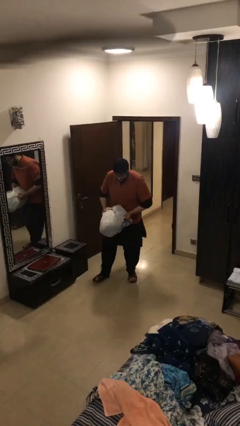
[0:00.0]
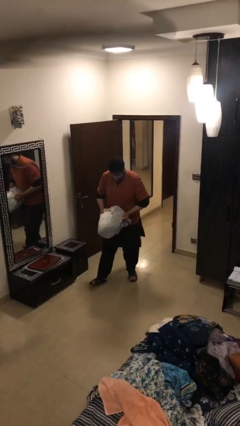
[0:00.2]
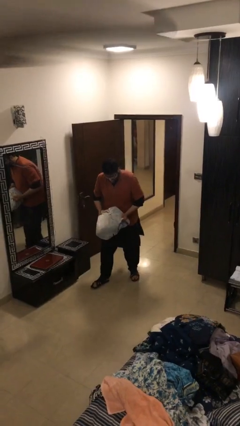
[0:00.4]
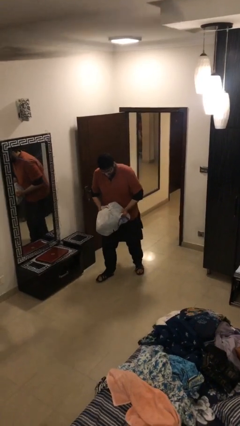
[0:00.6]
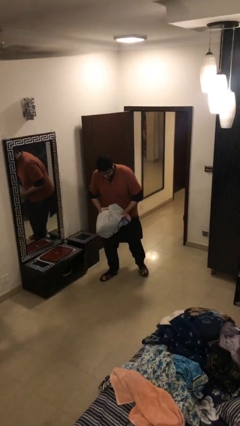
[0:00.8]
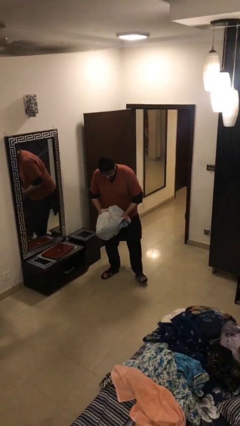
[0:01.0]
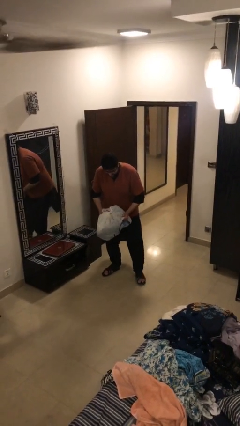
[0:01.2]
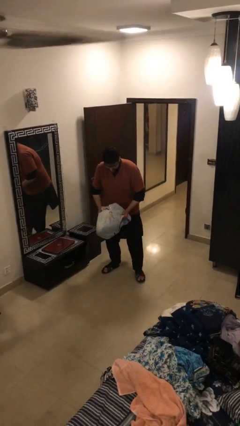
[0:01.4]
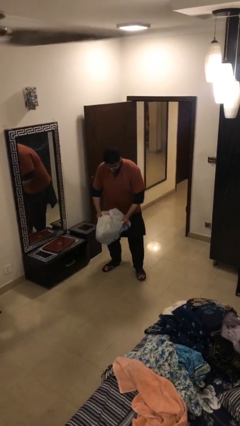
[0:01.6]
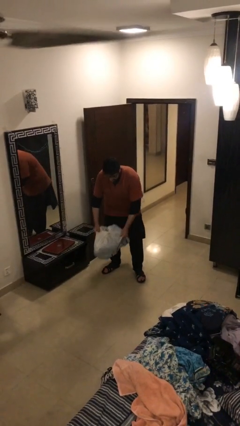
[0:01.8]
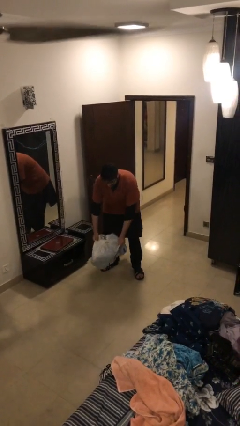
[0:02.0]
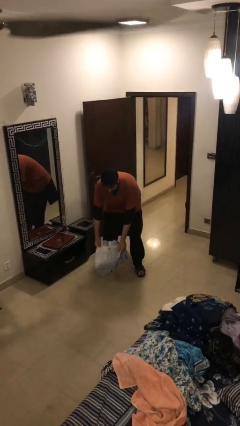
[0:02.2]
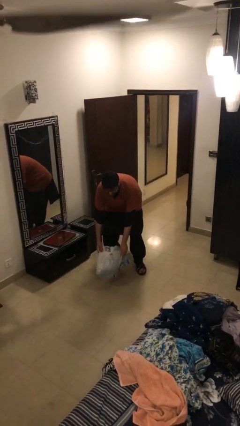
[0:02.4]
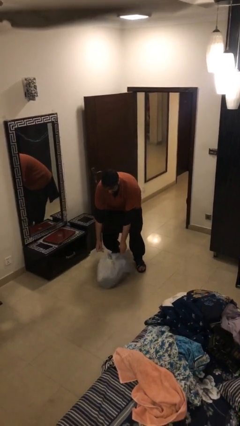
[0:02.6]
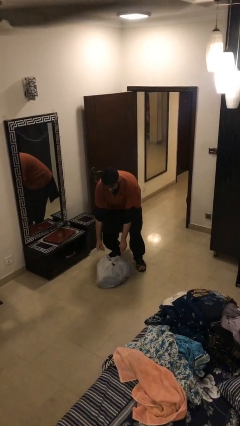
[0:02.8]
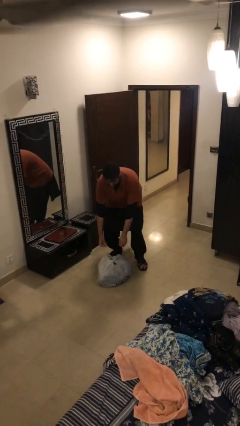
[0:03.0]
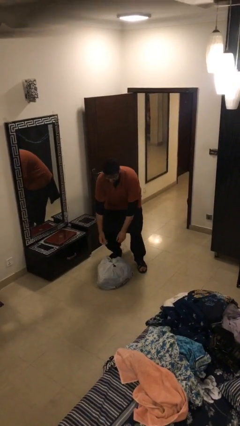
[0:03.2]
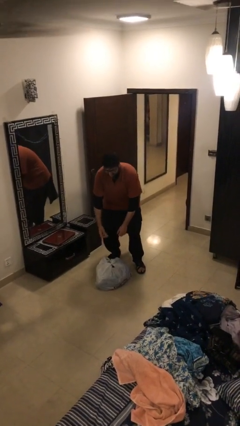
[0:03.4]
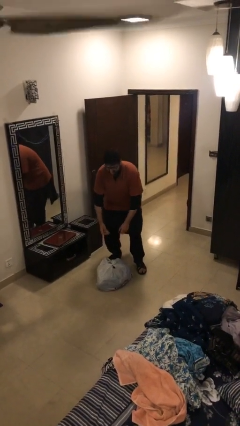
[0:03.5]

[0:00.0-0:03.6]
person puts down object on floor

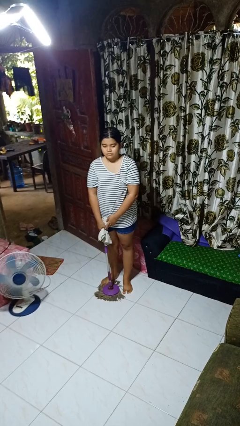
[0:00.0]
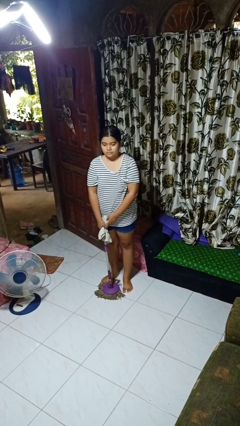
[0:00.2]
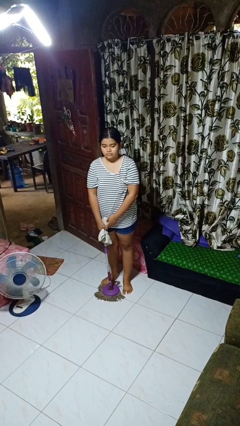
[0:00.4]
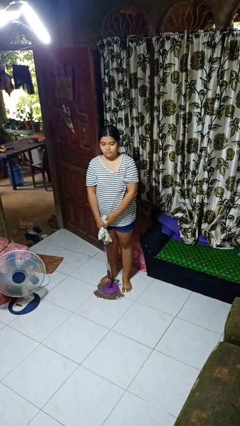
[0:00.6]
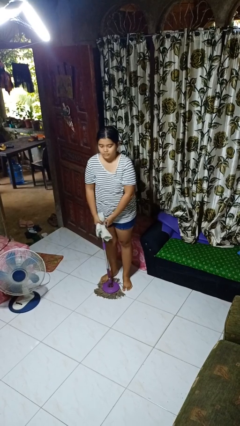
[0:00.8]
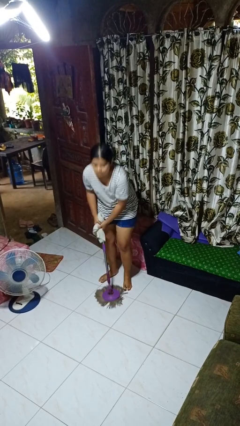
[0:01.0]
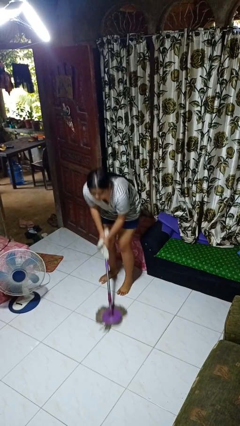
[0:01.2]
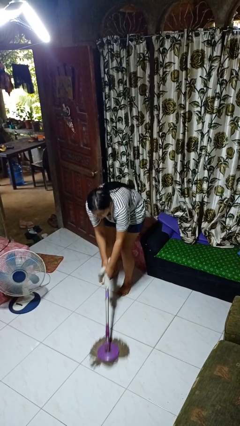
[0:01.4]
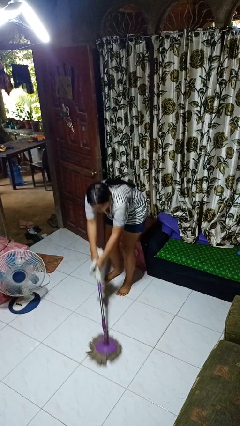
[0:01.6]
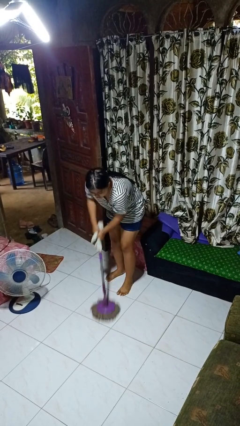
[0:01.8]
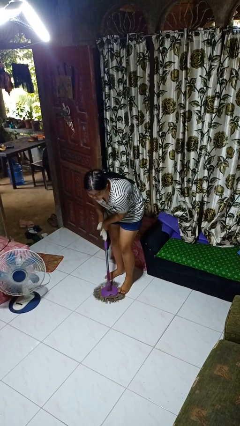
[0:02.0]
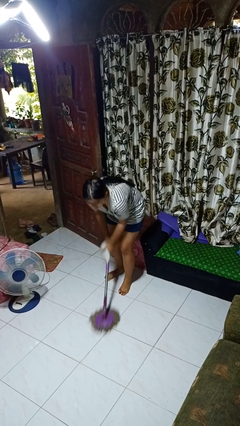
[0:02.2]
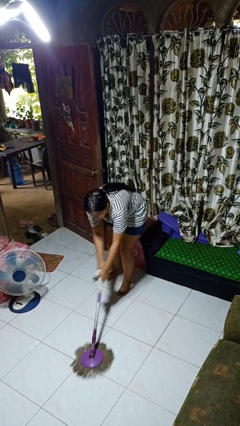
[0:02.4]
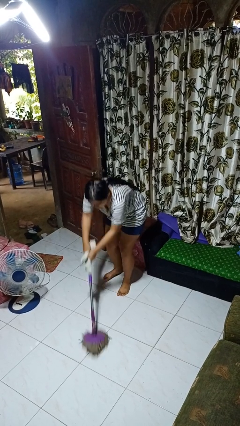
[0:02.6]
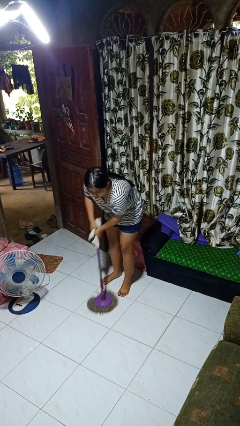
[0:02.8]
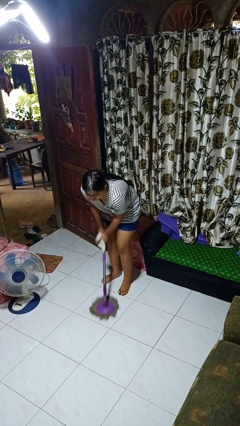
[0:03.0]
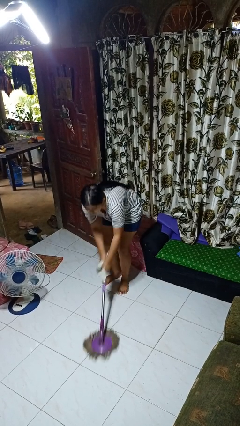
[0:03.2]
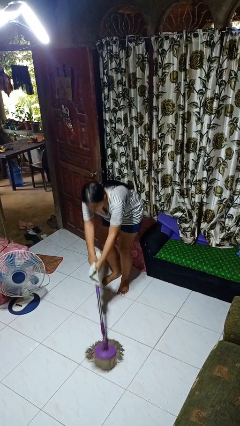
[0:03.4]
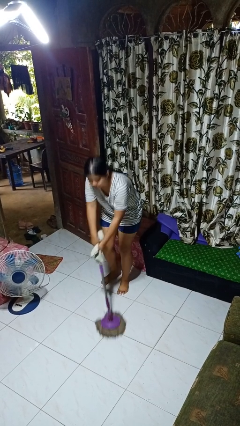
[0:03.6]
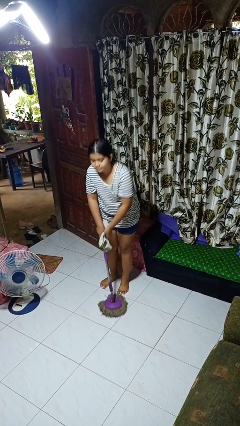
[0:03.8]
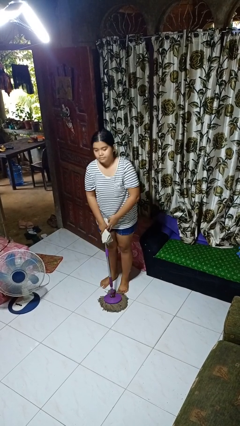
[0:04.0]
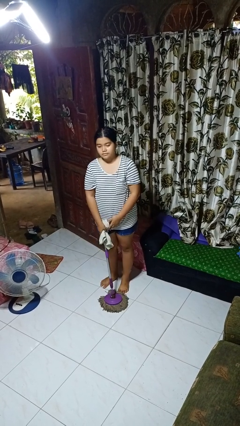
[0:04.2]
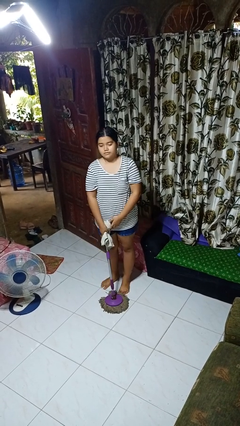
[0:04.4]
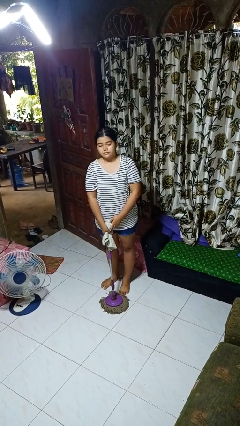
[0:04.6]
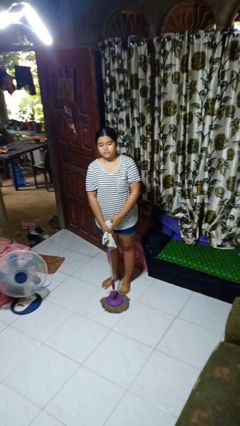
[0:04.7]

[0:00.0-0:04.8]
person mops

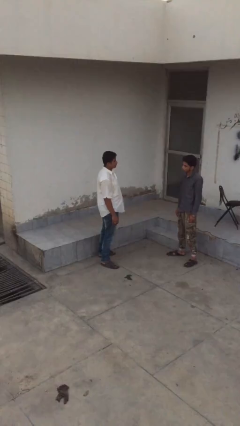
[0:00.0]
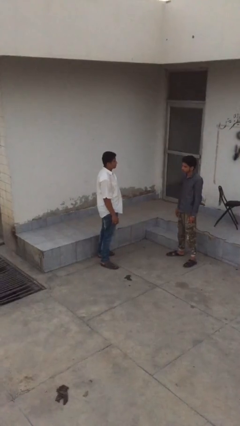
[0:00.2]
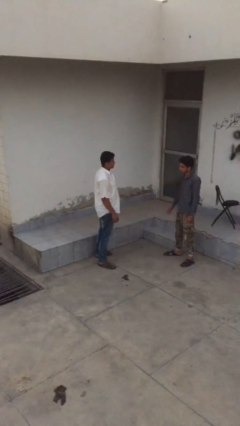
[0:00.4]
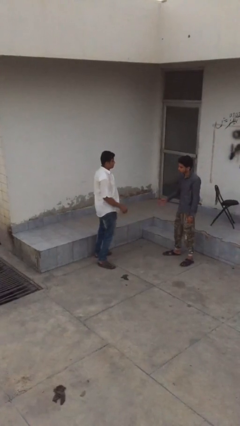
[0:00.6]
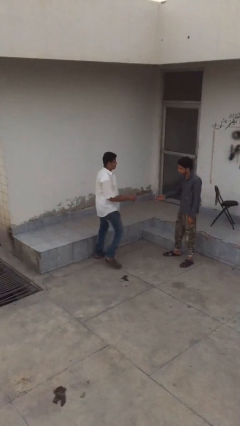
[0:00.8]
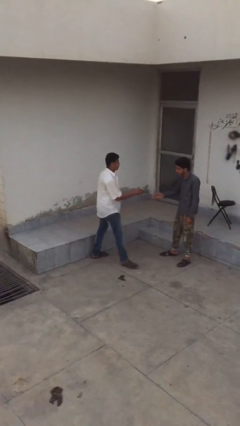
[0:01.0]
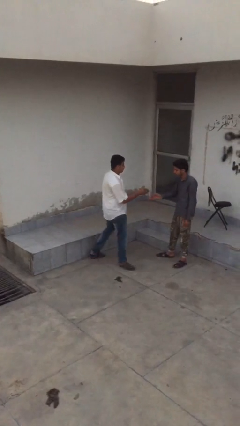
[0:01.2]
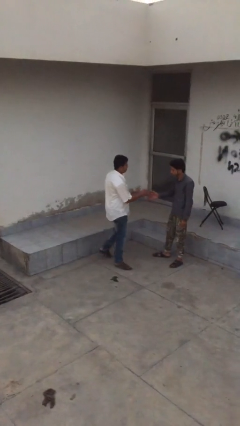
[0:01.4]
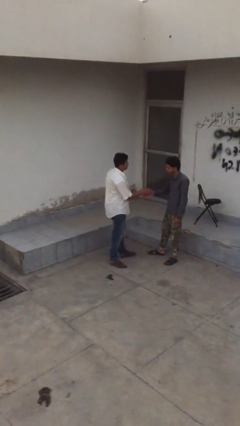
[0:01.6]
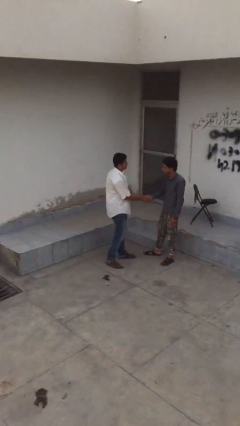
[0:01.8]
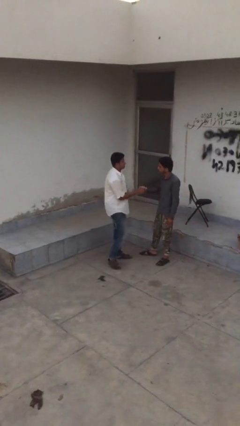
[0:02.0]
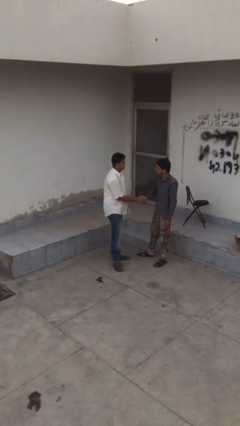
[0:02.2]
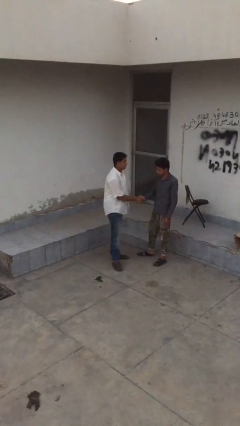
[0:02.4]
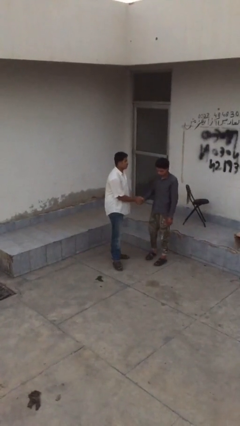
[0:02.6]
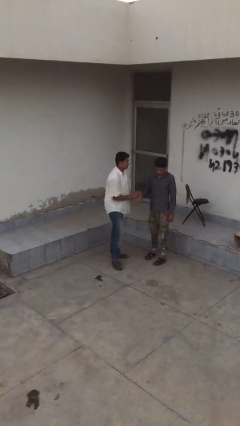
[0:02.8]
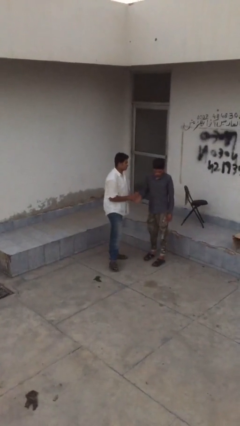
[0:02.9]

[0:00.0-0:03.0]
person shakes hand

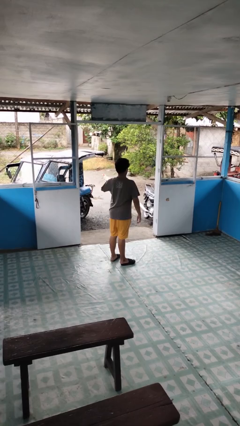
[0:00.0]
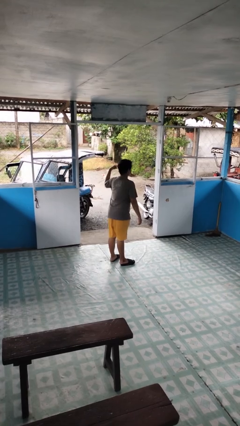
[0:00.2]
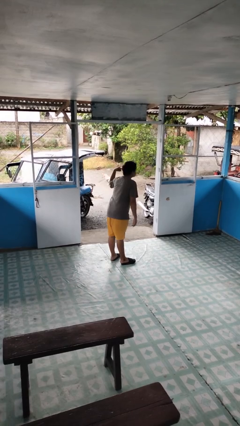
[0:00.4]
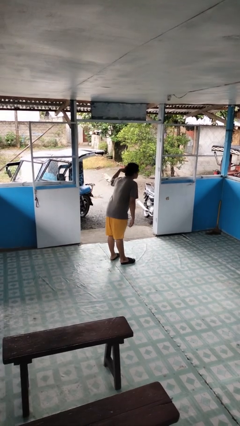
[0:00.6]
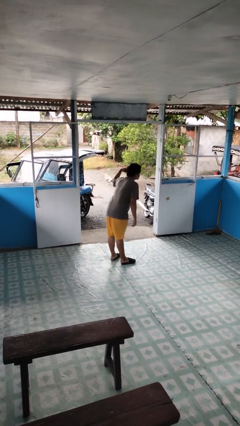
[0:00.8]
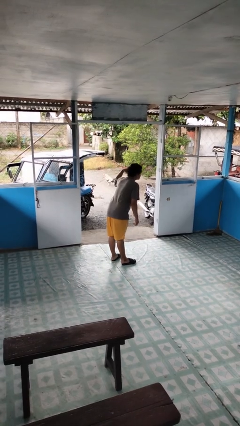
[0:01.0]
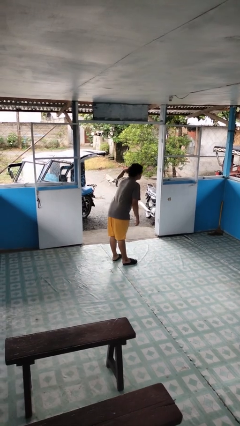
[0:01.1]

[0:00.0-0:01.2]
person gestures listen closely

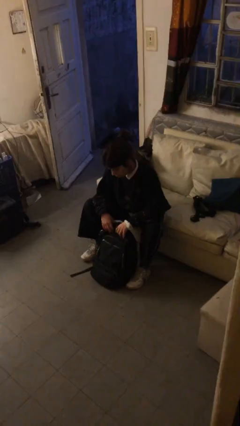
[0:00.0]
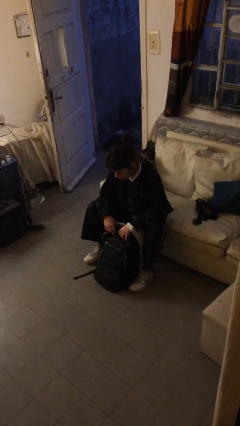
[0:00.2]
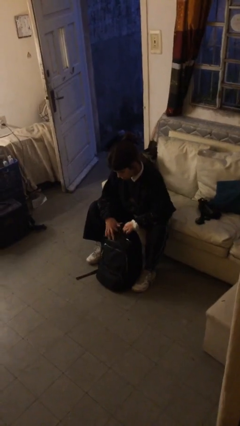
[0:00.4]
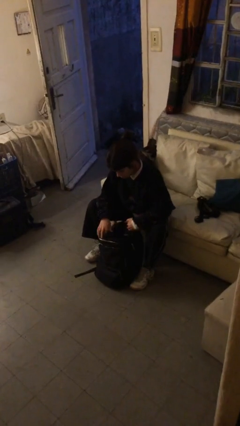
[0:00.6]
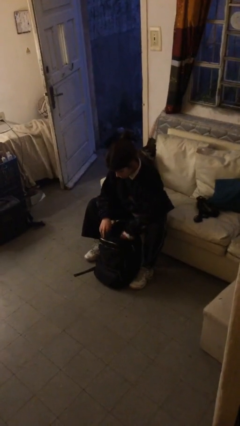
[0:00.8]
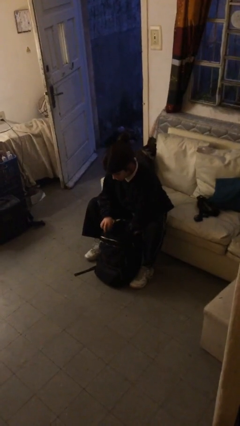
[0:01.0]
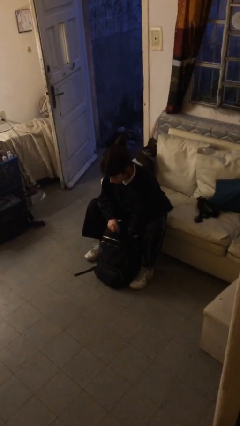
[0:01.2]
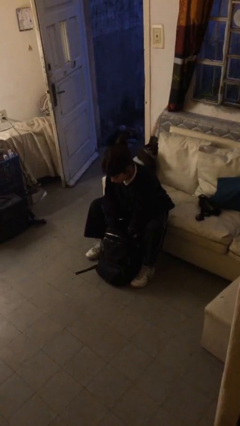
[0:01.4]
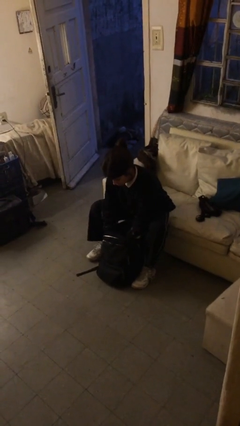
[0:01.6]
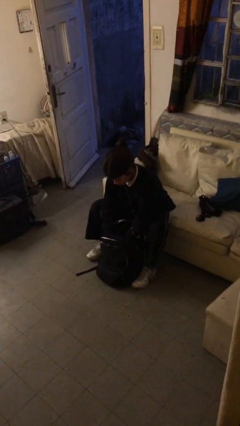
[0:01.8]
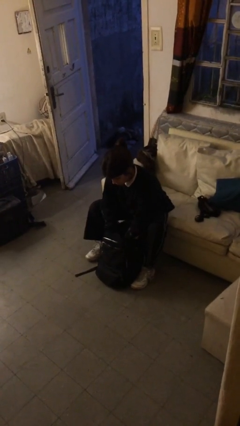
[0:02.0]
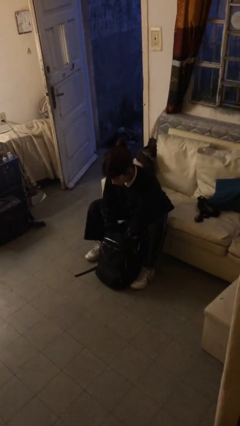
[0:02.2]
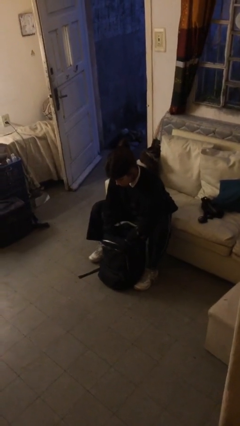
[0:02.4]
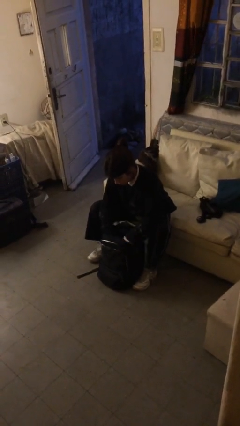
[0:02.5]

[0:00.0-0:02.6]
person searches in backpack

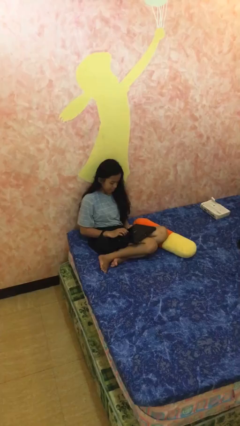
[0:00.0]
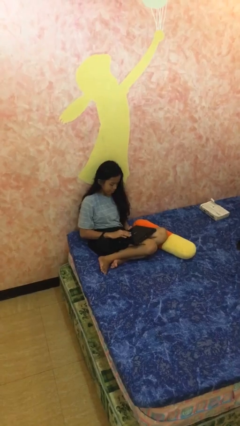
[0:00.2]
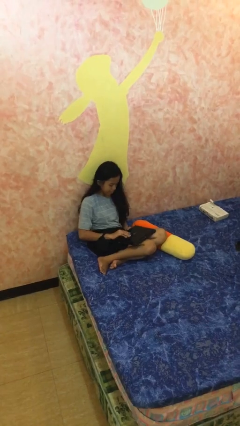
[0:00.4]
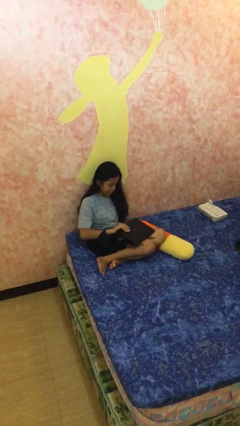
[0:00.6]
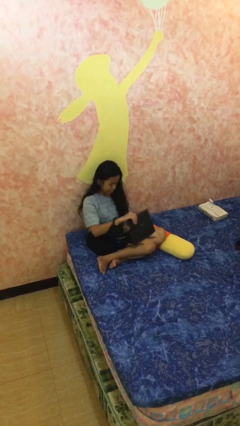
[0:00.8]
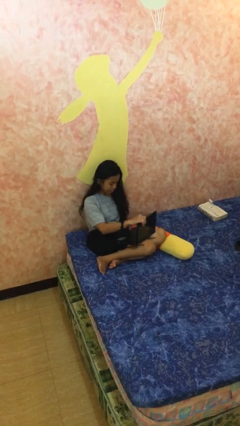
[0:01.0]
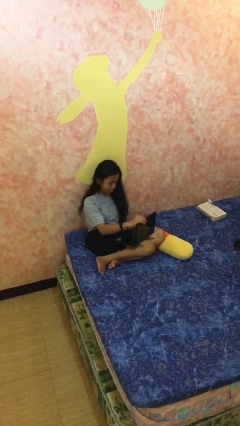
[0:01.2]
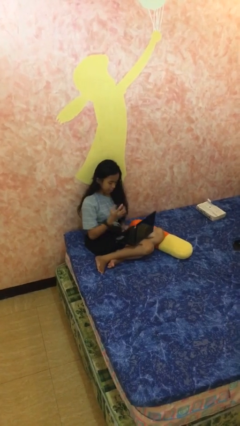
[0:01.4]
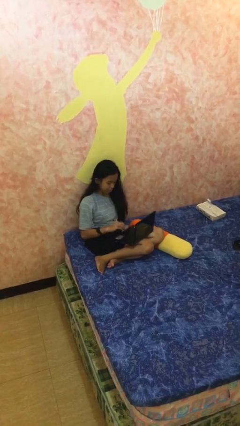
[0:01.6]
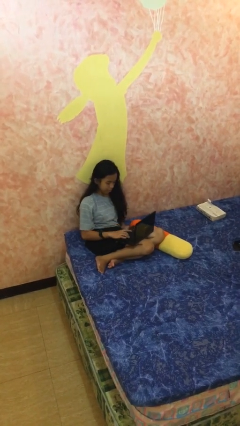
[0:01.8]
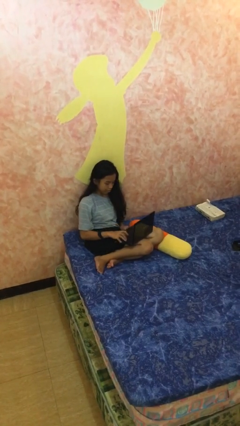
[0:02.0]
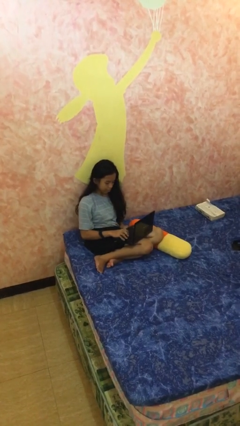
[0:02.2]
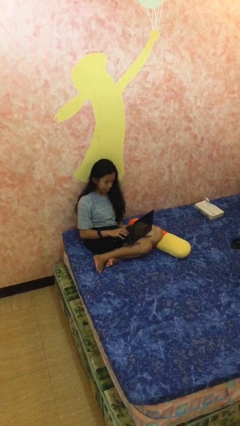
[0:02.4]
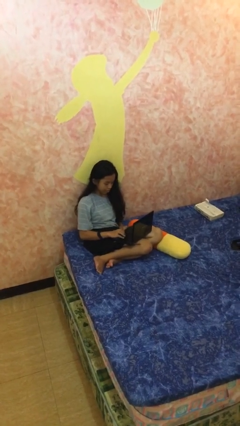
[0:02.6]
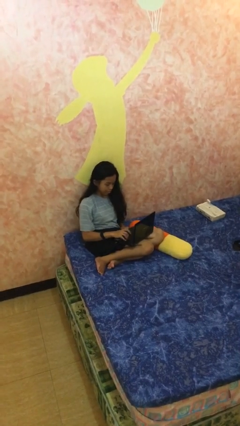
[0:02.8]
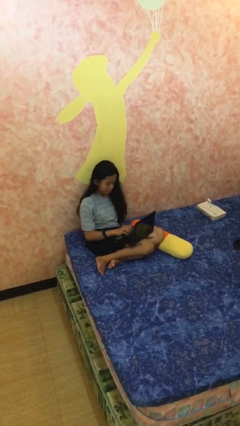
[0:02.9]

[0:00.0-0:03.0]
person interacts with laptop
